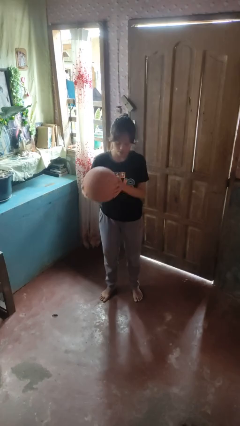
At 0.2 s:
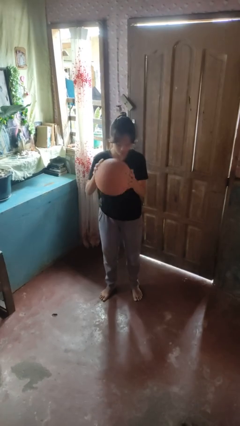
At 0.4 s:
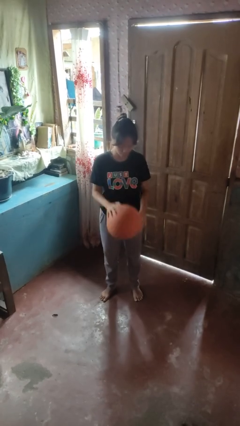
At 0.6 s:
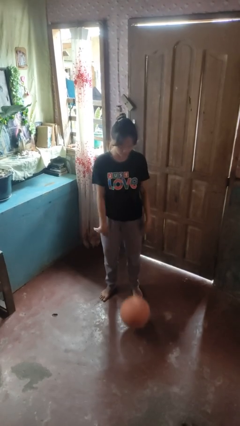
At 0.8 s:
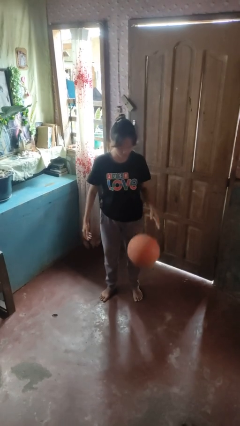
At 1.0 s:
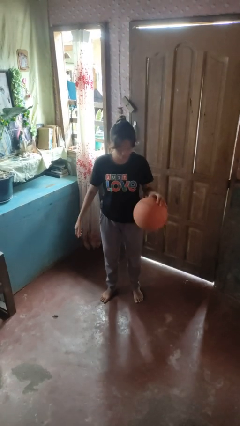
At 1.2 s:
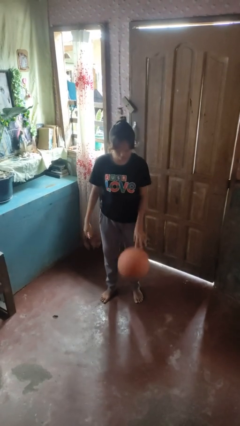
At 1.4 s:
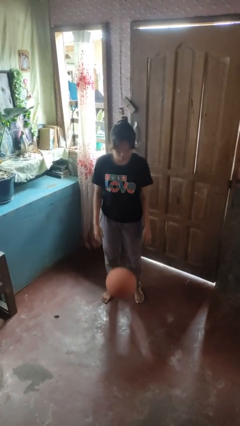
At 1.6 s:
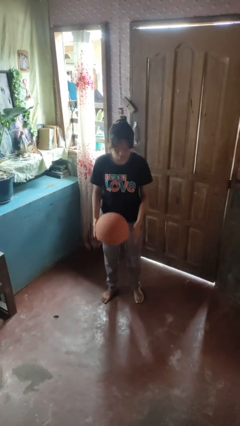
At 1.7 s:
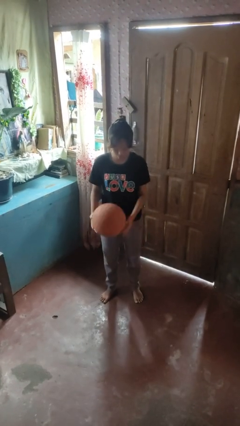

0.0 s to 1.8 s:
person bounces ball on floor

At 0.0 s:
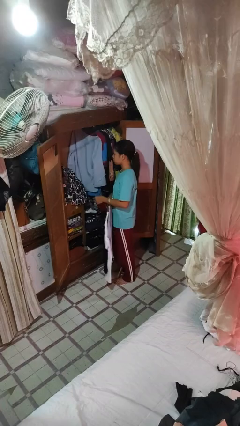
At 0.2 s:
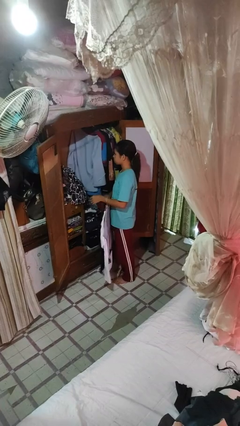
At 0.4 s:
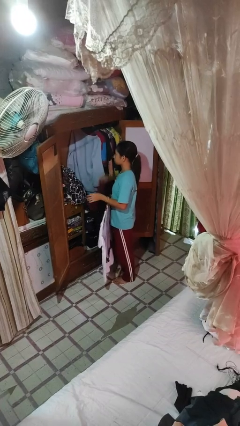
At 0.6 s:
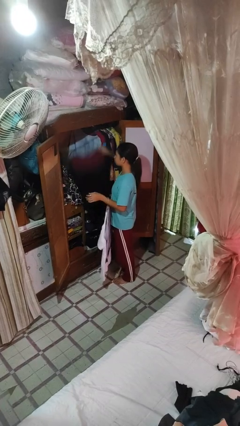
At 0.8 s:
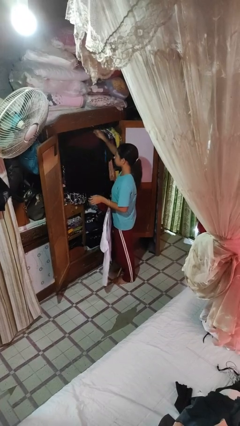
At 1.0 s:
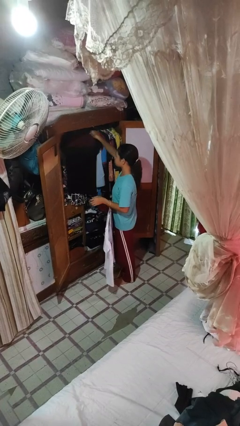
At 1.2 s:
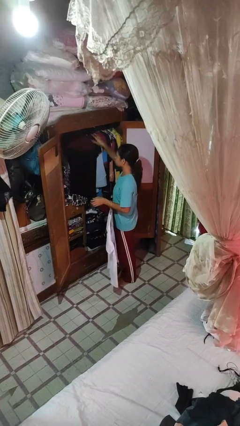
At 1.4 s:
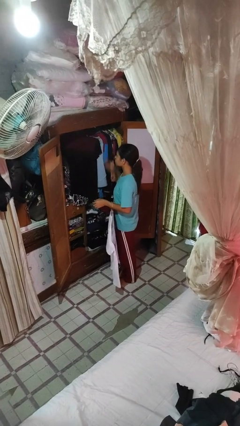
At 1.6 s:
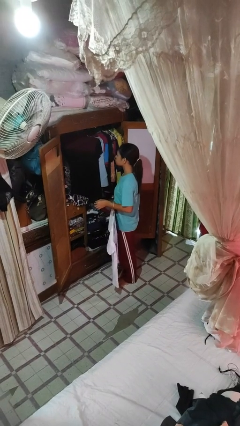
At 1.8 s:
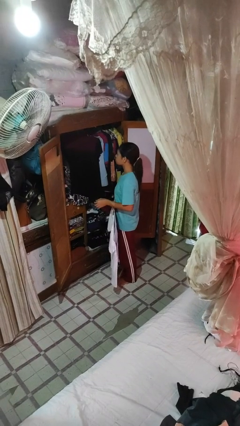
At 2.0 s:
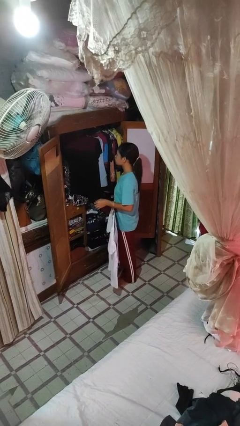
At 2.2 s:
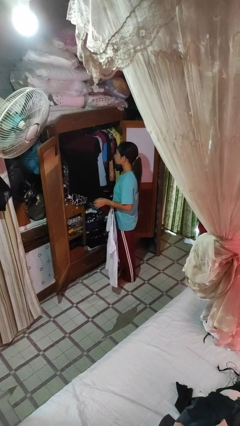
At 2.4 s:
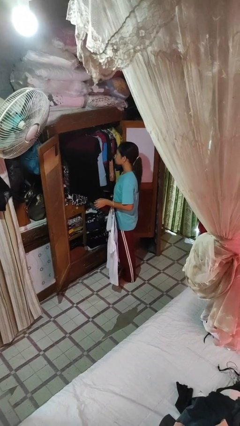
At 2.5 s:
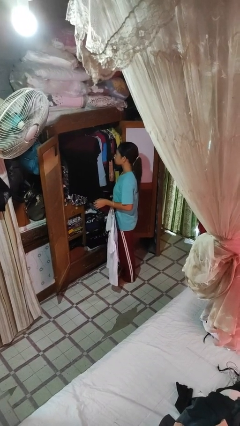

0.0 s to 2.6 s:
person puts clothes into closet

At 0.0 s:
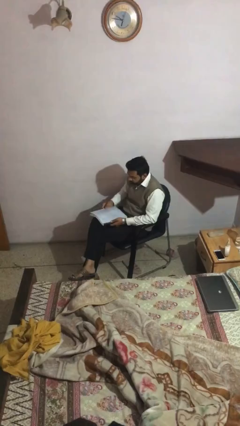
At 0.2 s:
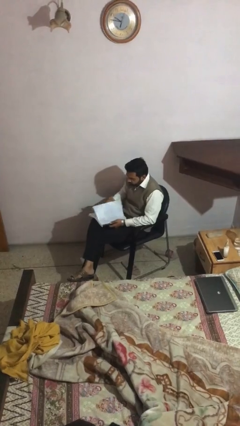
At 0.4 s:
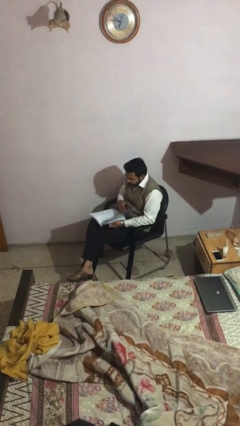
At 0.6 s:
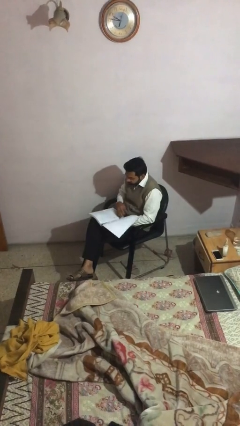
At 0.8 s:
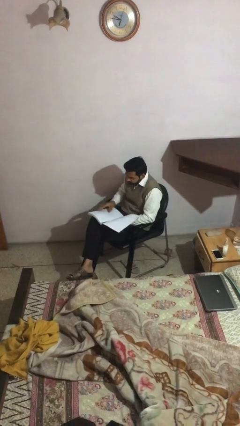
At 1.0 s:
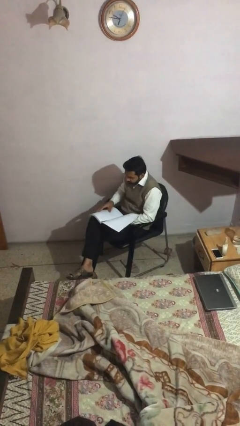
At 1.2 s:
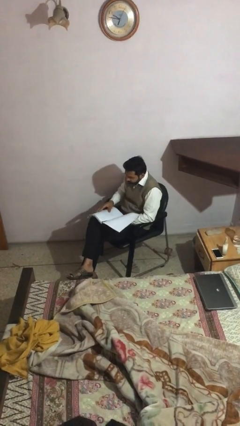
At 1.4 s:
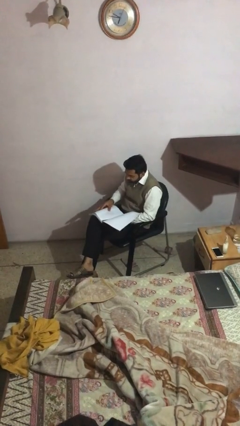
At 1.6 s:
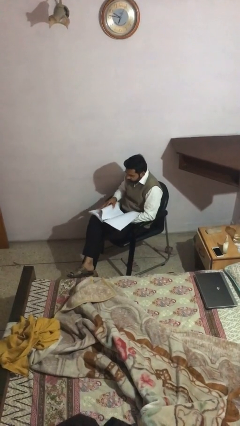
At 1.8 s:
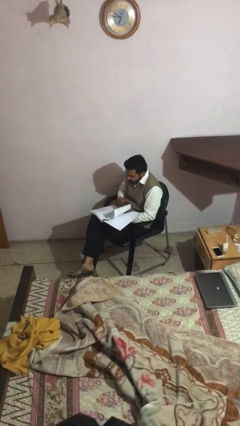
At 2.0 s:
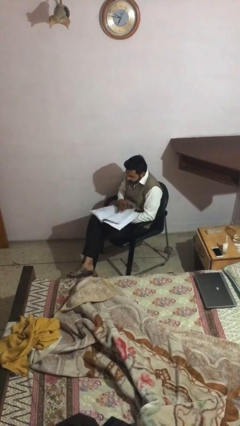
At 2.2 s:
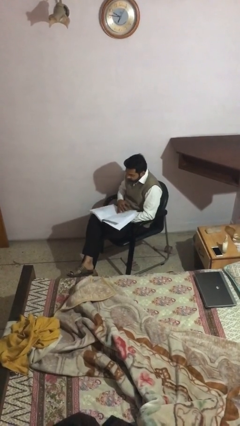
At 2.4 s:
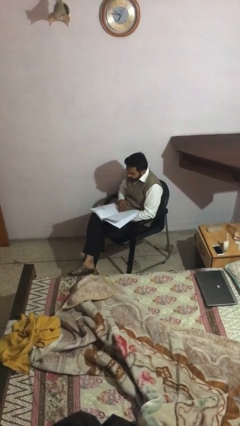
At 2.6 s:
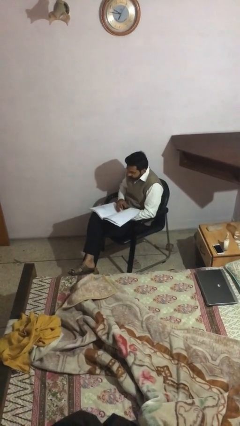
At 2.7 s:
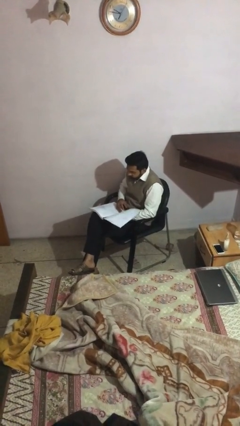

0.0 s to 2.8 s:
person reads document

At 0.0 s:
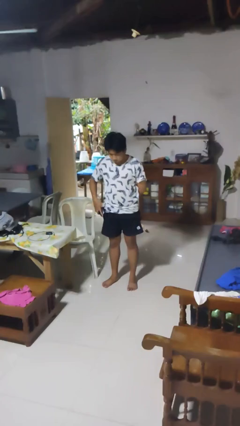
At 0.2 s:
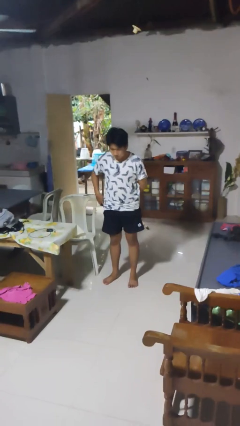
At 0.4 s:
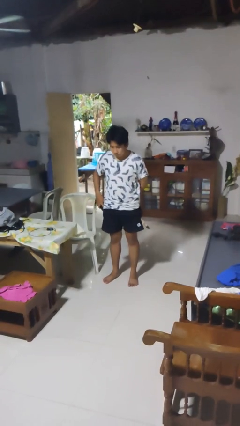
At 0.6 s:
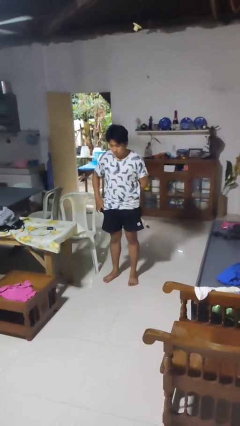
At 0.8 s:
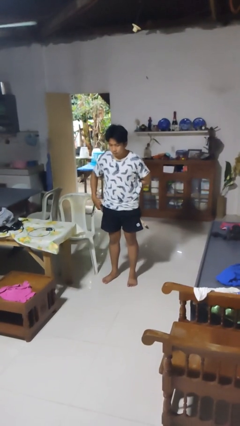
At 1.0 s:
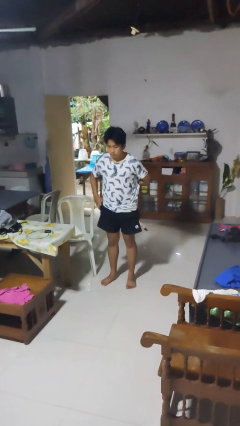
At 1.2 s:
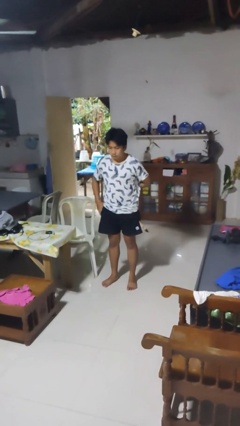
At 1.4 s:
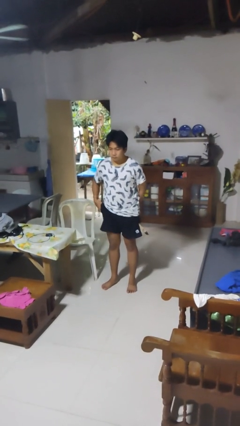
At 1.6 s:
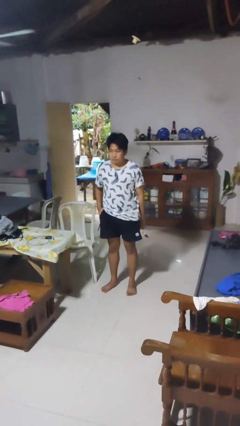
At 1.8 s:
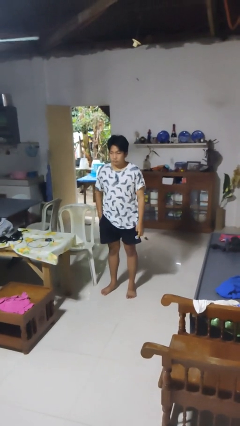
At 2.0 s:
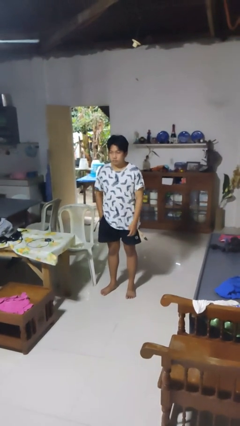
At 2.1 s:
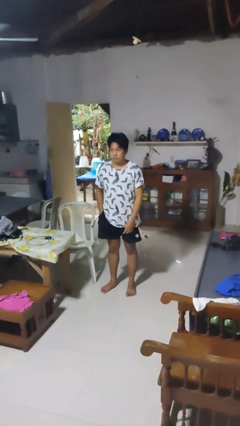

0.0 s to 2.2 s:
person puts phone into pocket

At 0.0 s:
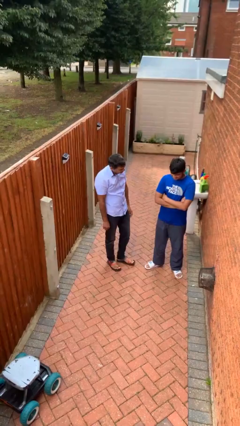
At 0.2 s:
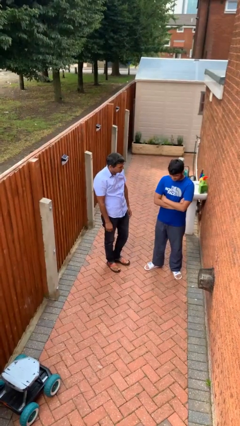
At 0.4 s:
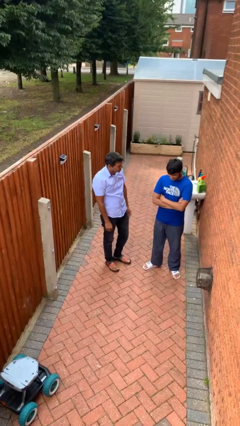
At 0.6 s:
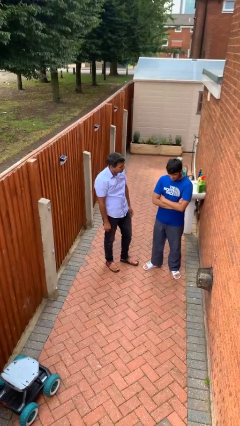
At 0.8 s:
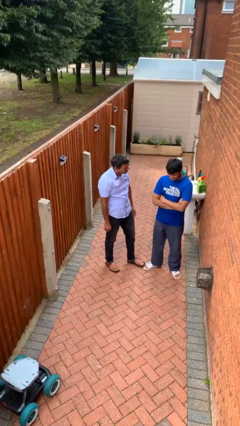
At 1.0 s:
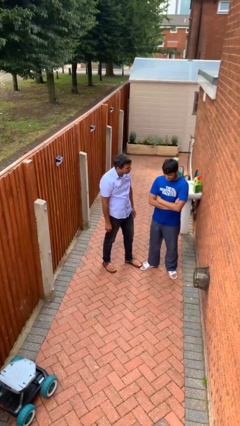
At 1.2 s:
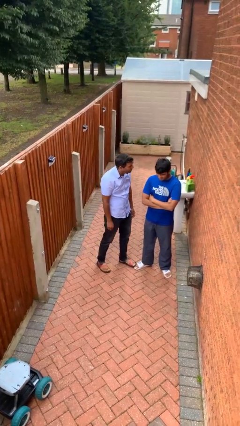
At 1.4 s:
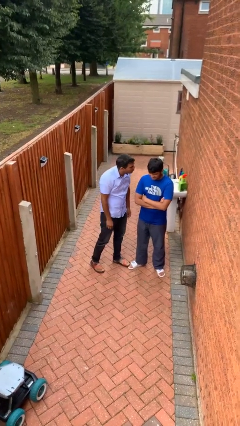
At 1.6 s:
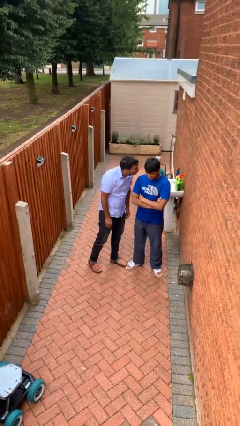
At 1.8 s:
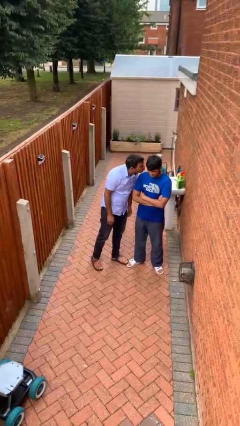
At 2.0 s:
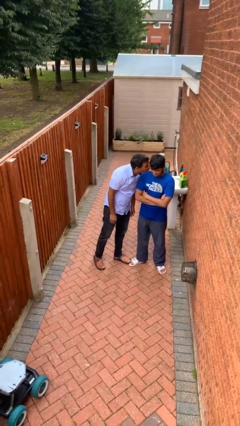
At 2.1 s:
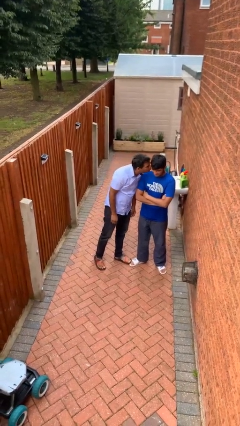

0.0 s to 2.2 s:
person kisses cheek of person

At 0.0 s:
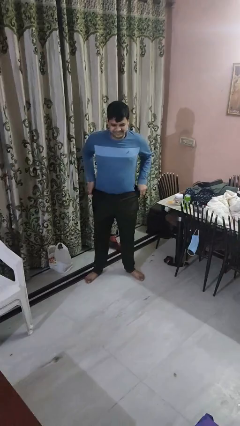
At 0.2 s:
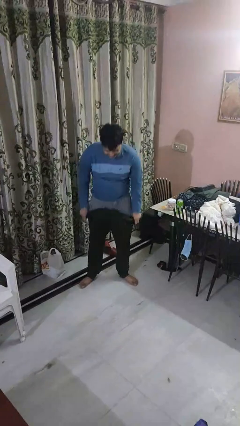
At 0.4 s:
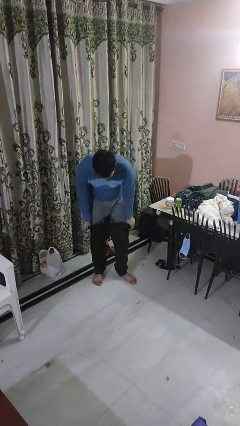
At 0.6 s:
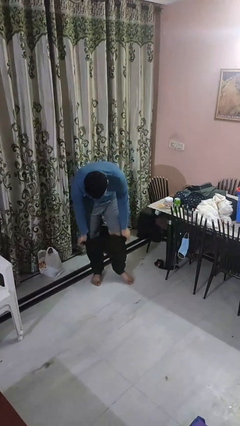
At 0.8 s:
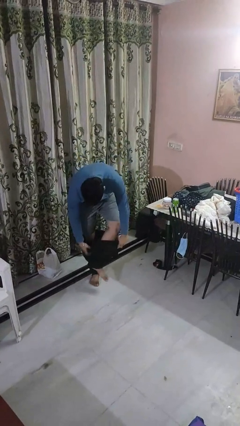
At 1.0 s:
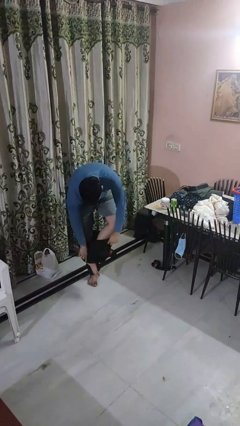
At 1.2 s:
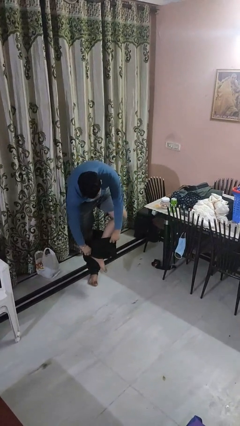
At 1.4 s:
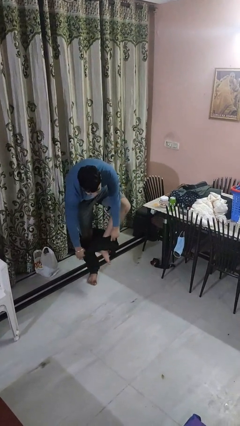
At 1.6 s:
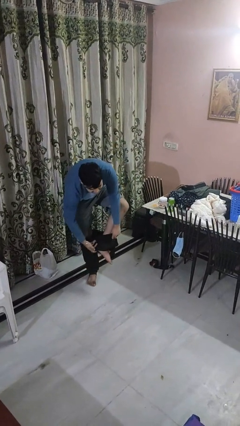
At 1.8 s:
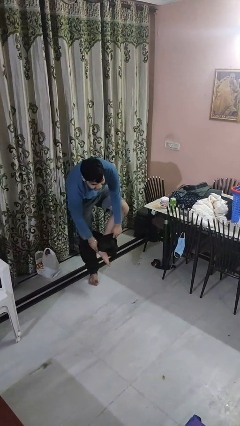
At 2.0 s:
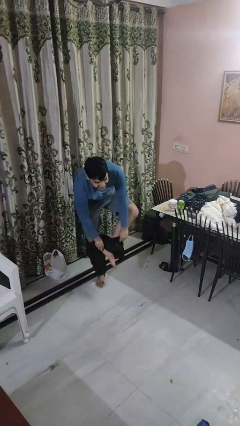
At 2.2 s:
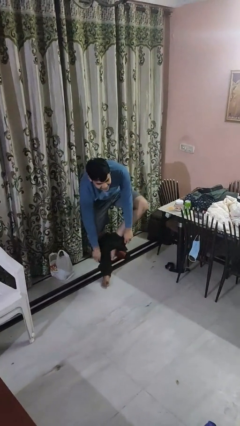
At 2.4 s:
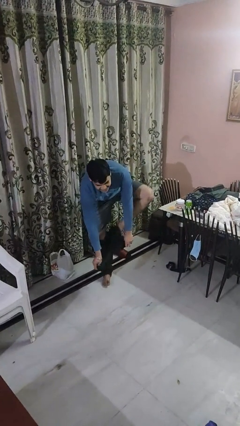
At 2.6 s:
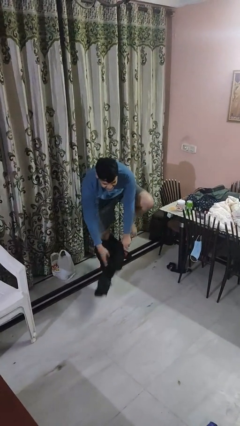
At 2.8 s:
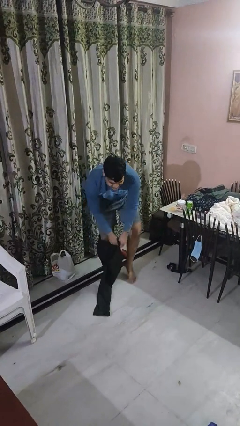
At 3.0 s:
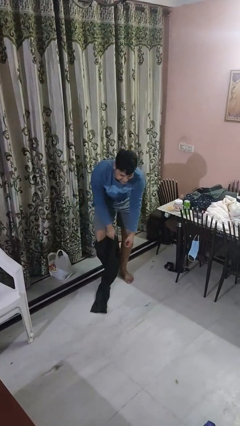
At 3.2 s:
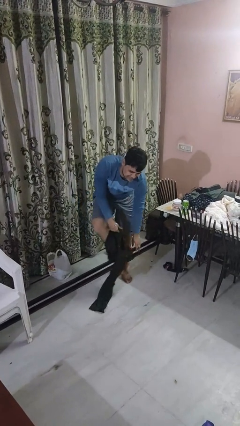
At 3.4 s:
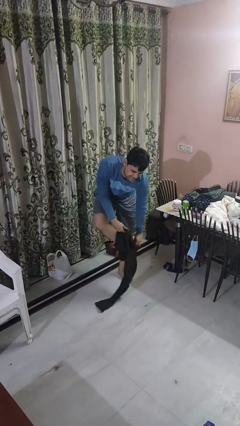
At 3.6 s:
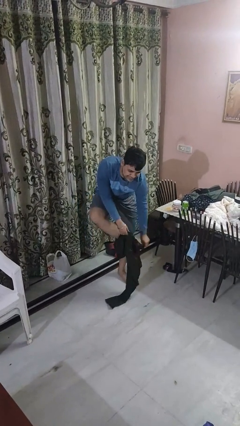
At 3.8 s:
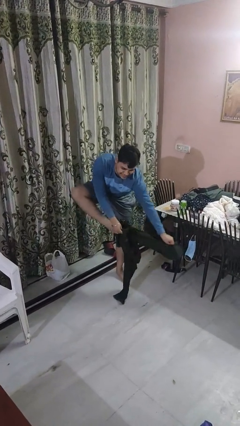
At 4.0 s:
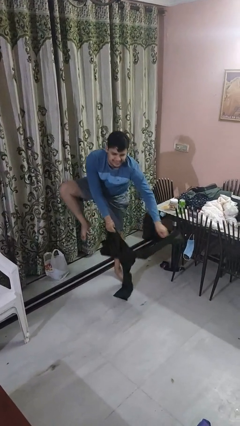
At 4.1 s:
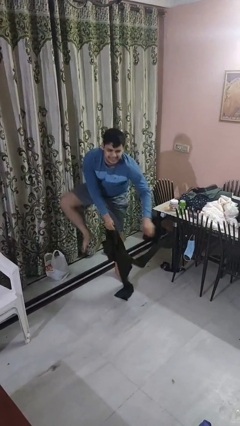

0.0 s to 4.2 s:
person takes off pants

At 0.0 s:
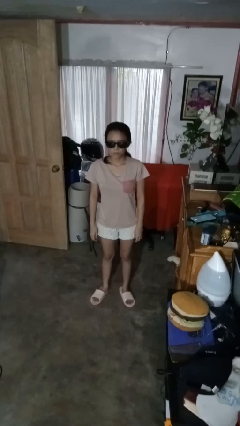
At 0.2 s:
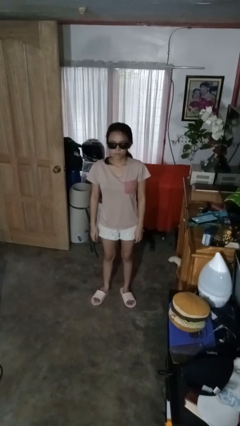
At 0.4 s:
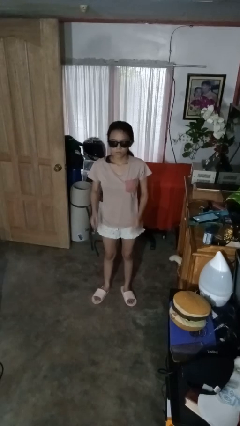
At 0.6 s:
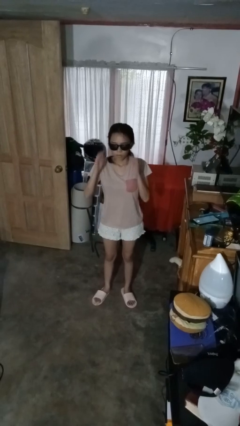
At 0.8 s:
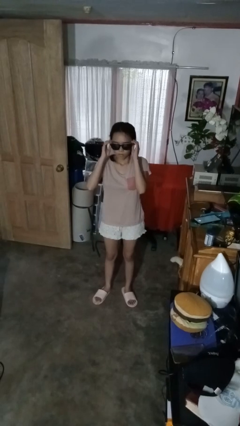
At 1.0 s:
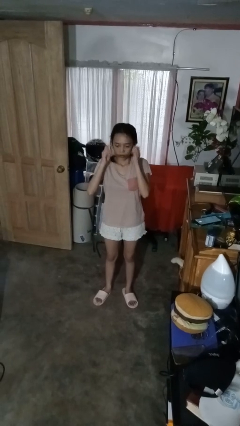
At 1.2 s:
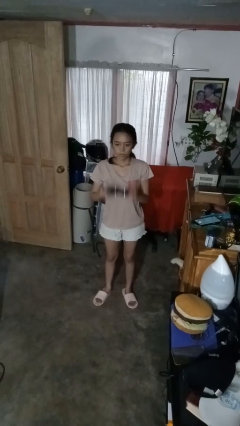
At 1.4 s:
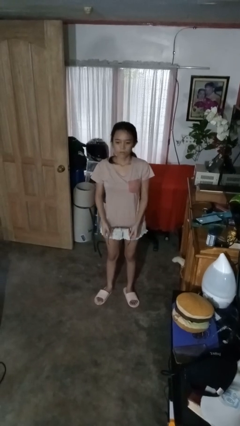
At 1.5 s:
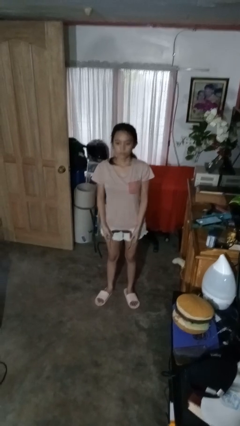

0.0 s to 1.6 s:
person takes off sunglasses

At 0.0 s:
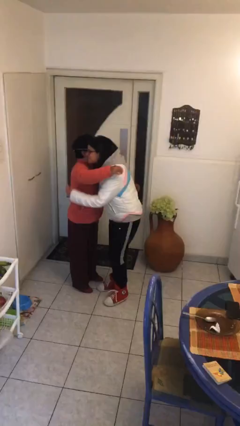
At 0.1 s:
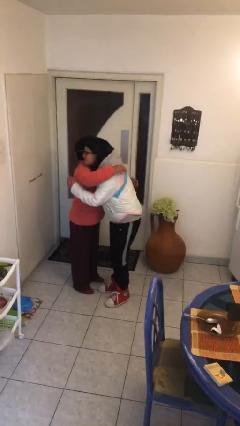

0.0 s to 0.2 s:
person embraces person
